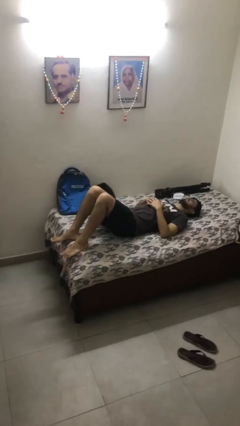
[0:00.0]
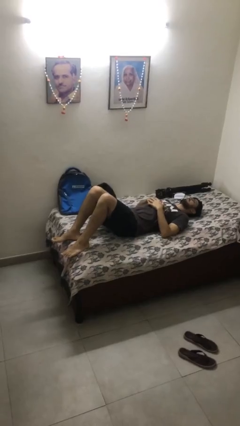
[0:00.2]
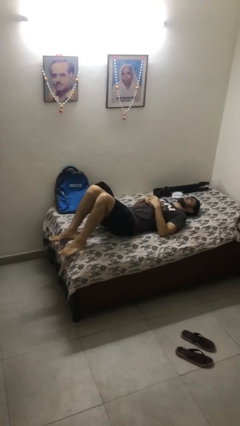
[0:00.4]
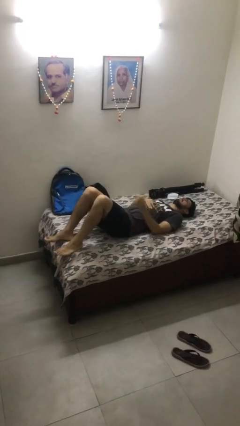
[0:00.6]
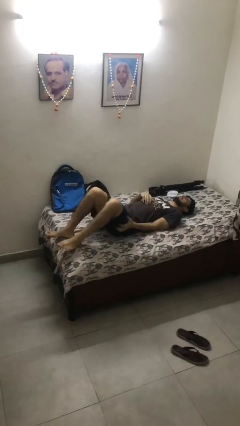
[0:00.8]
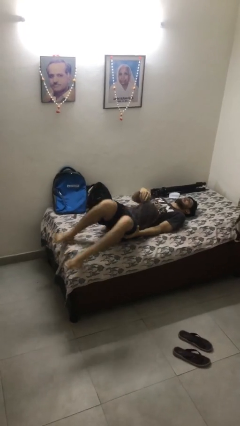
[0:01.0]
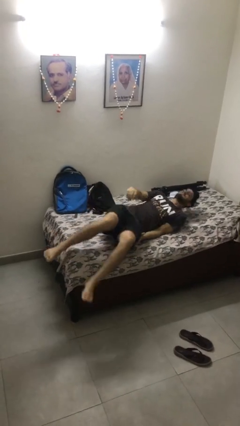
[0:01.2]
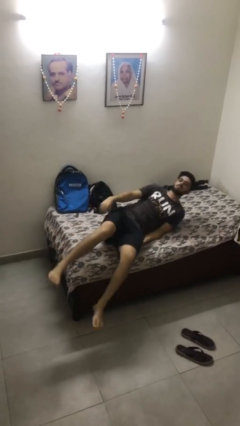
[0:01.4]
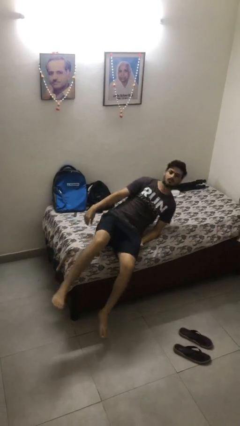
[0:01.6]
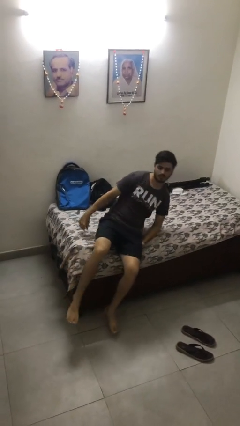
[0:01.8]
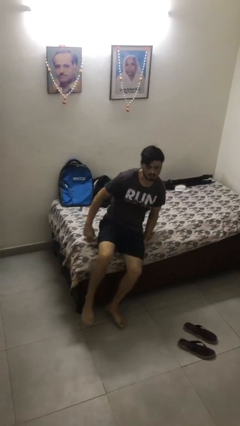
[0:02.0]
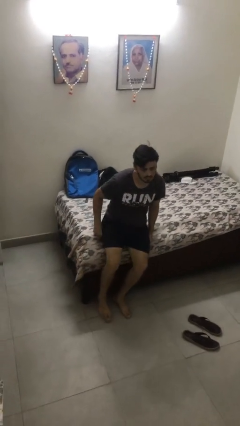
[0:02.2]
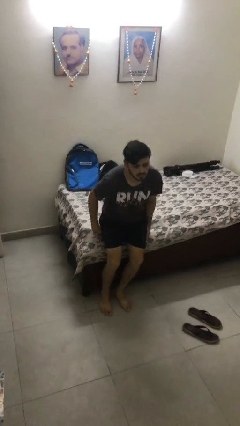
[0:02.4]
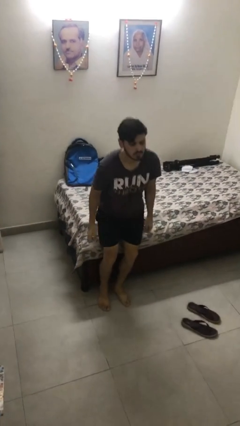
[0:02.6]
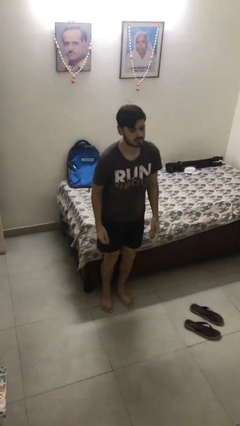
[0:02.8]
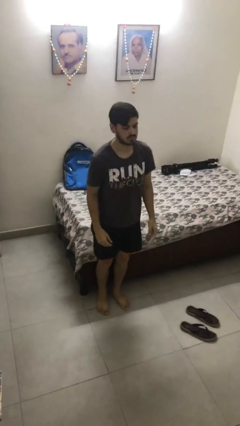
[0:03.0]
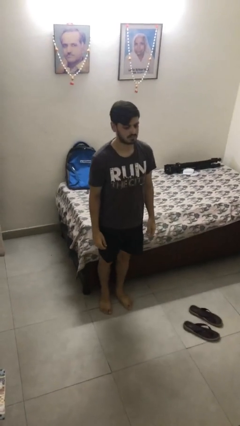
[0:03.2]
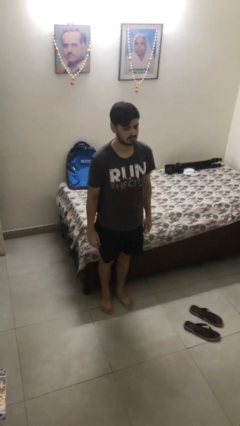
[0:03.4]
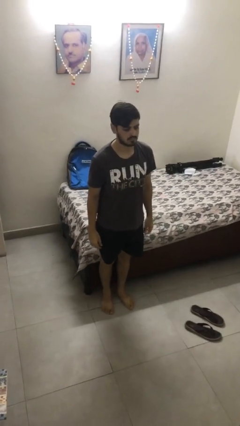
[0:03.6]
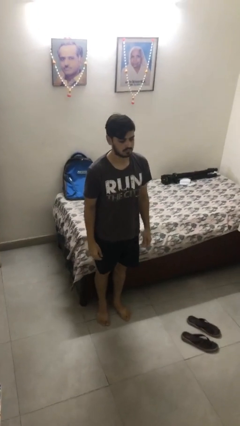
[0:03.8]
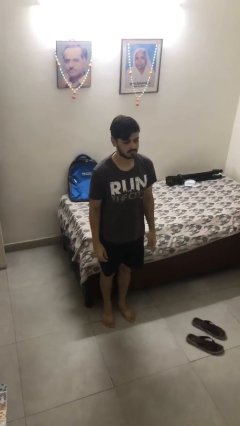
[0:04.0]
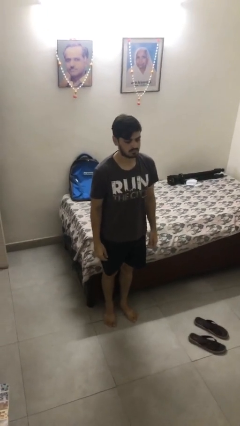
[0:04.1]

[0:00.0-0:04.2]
person stands up

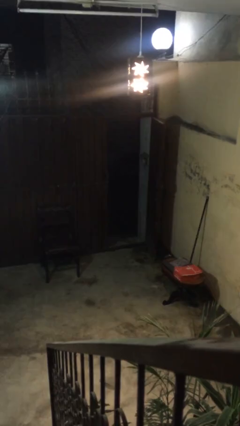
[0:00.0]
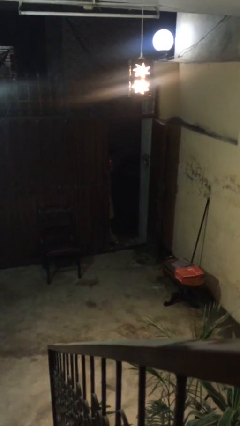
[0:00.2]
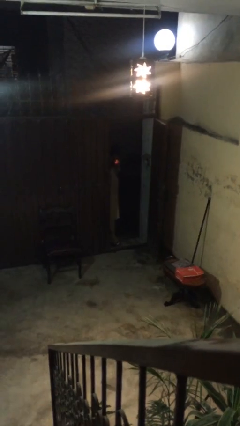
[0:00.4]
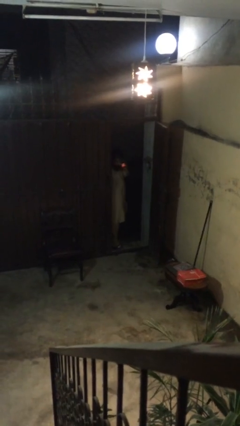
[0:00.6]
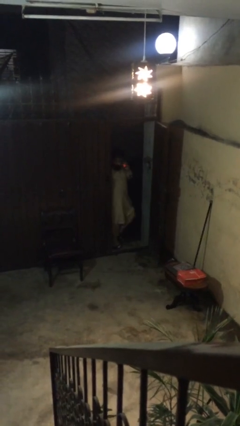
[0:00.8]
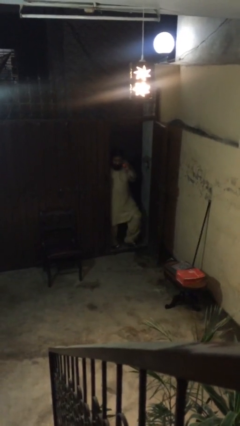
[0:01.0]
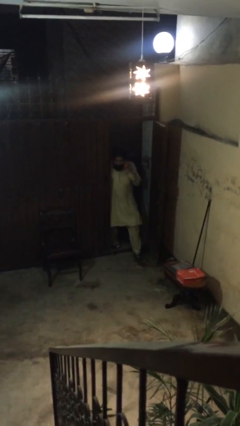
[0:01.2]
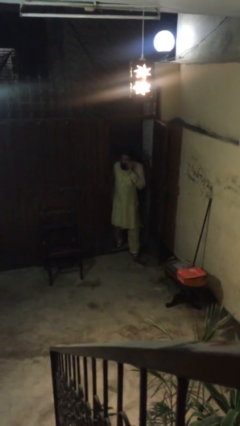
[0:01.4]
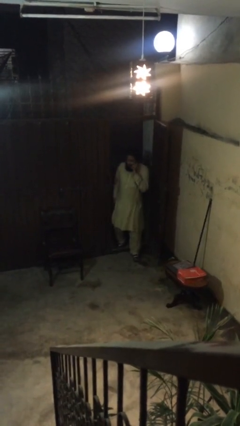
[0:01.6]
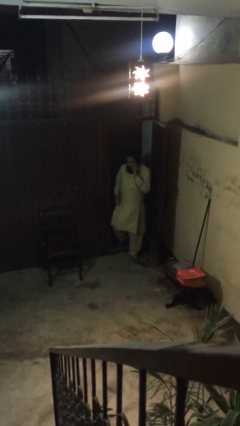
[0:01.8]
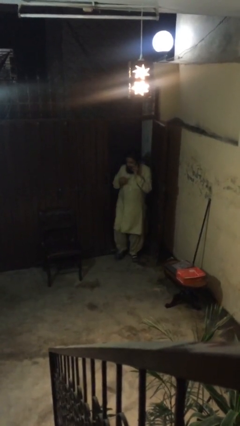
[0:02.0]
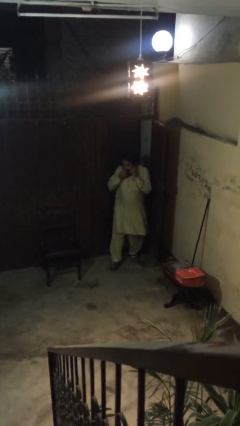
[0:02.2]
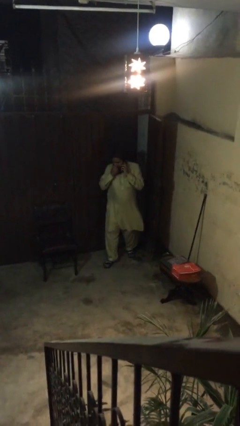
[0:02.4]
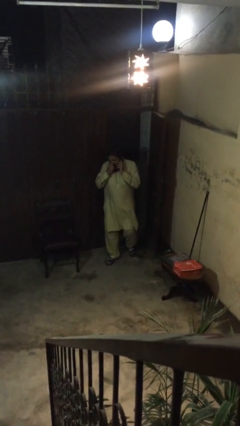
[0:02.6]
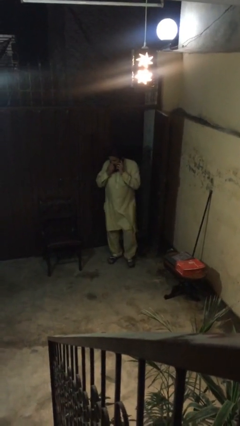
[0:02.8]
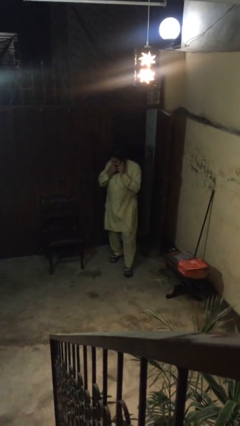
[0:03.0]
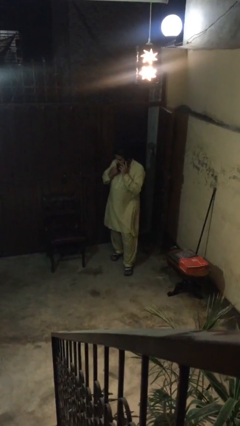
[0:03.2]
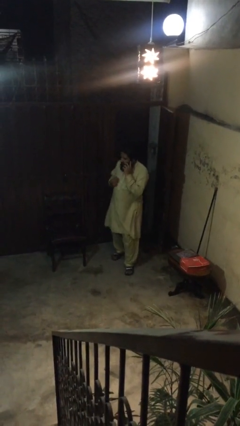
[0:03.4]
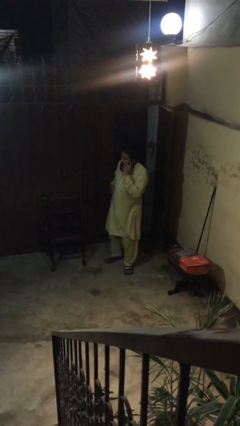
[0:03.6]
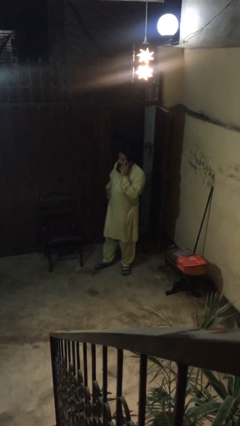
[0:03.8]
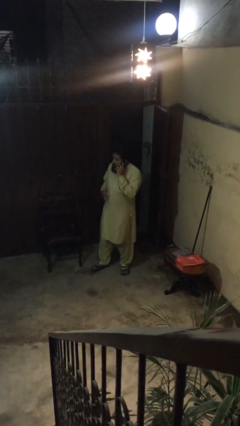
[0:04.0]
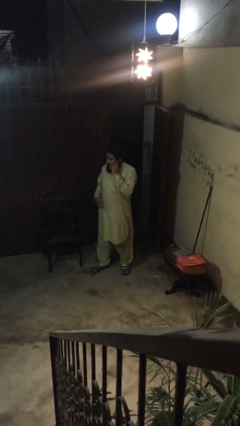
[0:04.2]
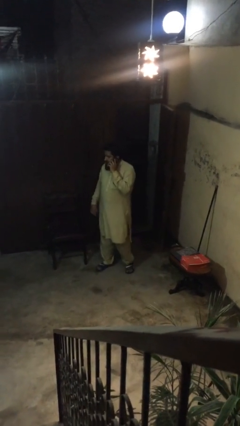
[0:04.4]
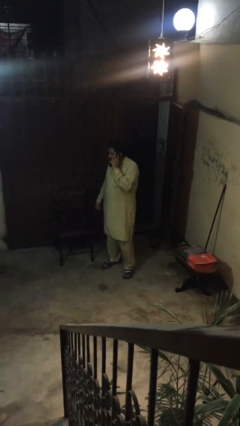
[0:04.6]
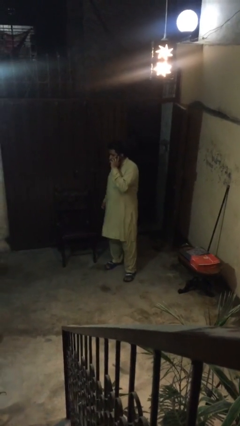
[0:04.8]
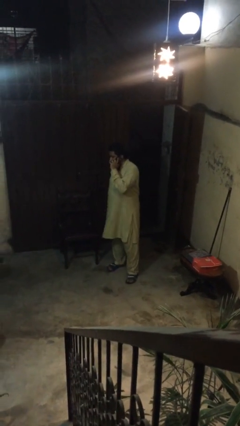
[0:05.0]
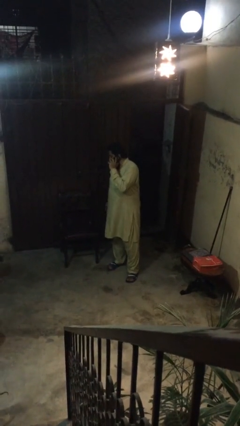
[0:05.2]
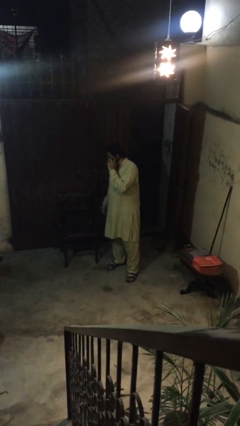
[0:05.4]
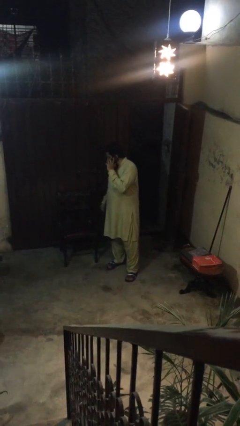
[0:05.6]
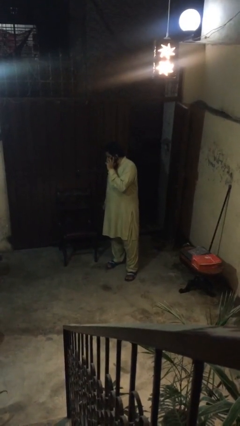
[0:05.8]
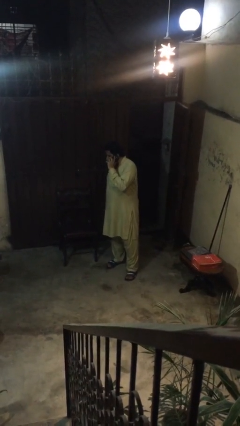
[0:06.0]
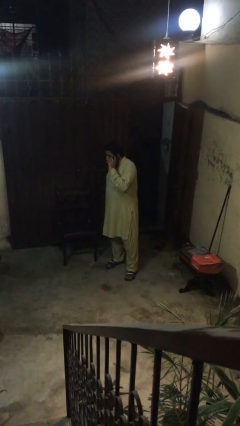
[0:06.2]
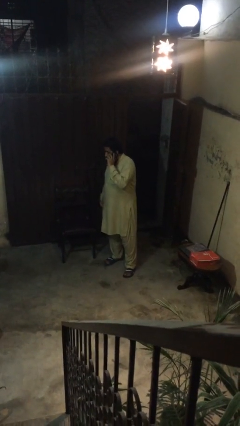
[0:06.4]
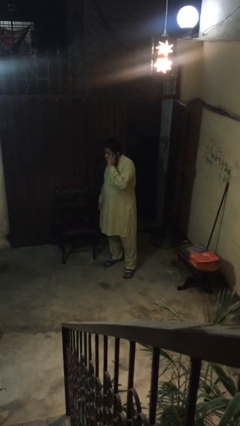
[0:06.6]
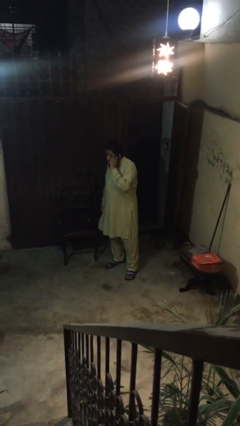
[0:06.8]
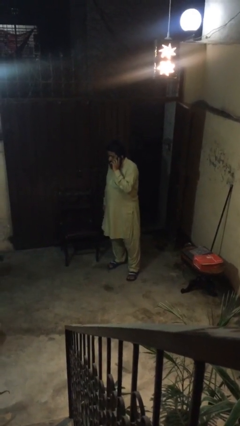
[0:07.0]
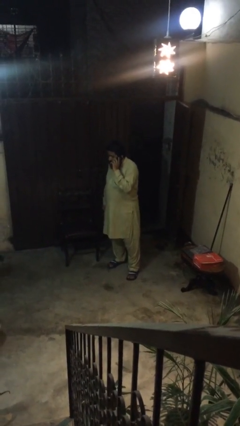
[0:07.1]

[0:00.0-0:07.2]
person enters scene through structure

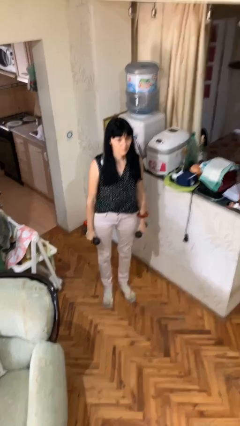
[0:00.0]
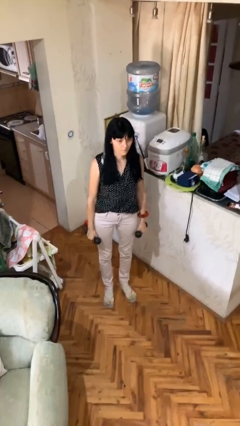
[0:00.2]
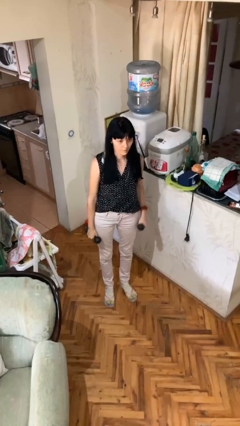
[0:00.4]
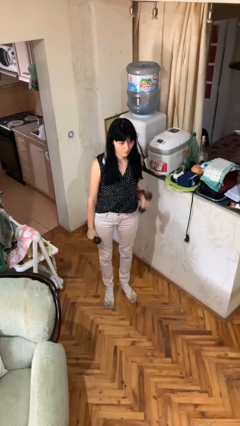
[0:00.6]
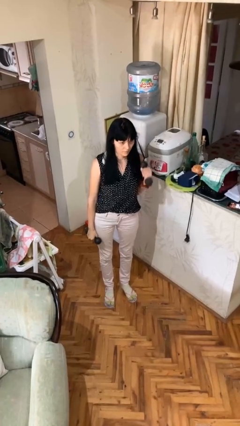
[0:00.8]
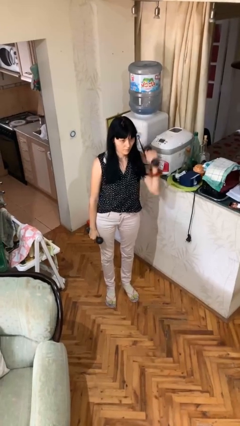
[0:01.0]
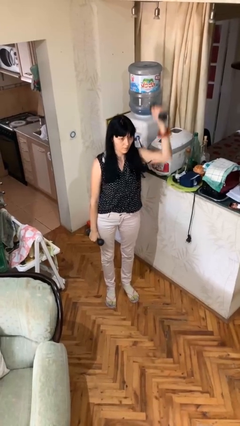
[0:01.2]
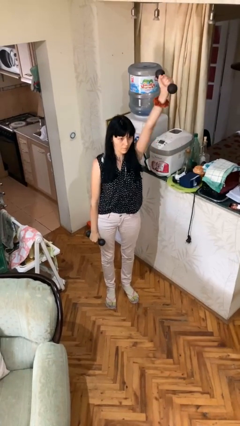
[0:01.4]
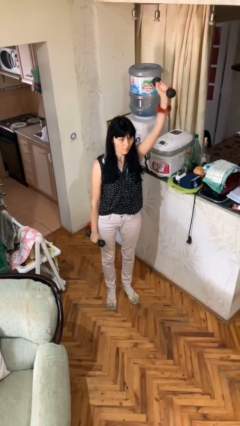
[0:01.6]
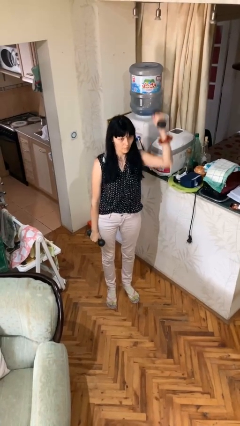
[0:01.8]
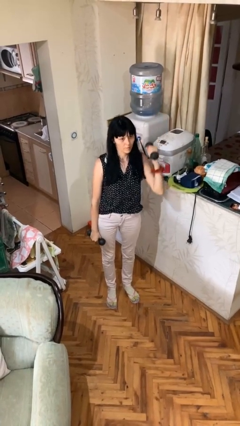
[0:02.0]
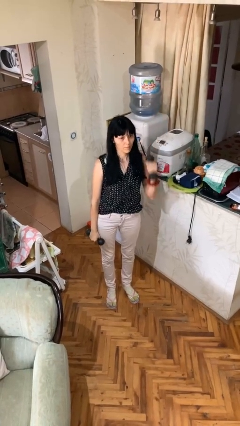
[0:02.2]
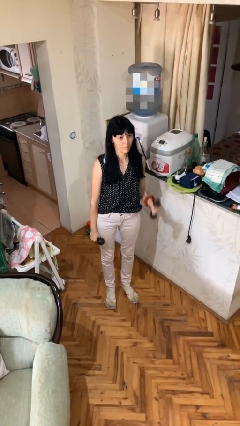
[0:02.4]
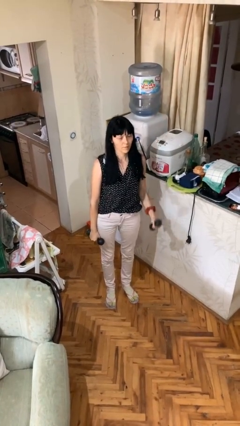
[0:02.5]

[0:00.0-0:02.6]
person lifts dumbbells

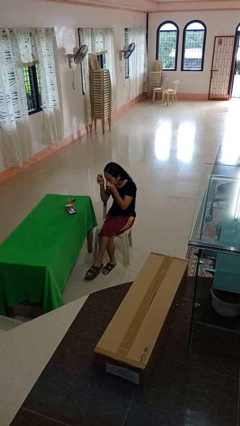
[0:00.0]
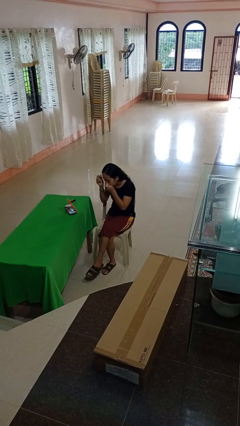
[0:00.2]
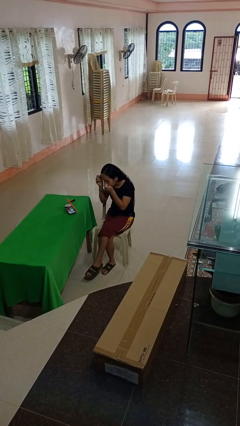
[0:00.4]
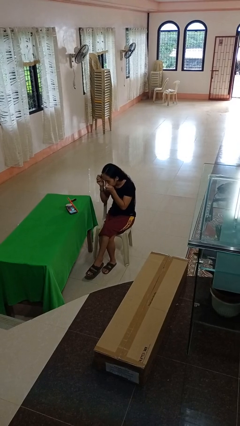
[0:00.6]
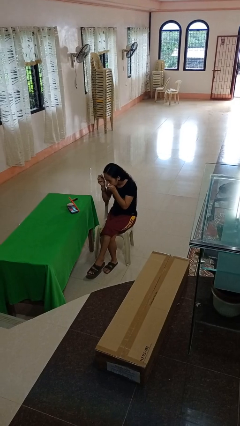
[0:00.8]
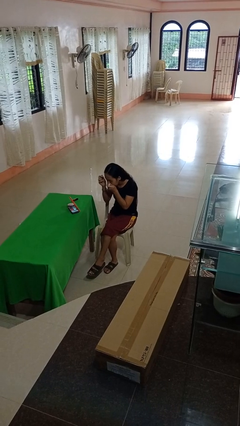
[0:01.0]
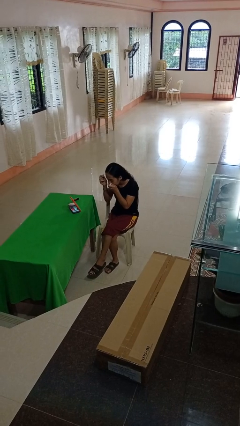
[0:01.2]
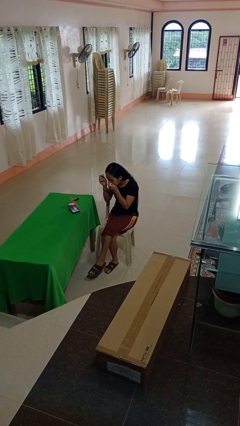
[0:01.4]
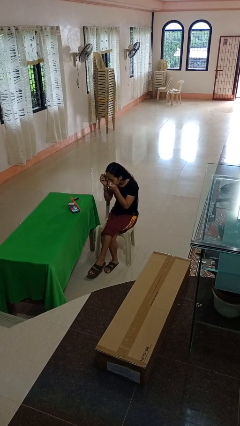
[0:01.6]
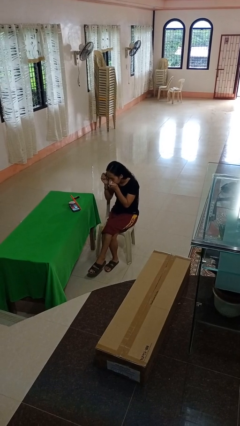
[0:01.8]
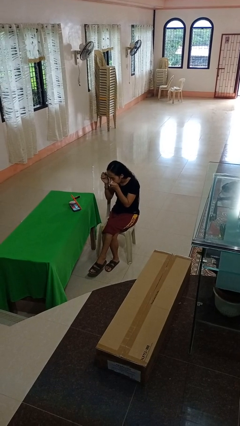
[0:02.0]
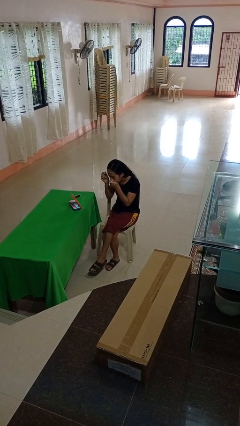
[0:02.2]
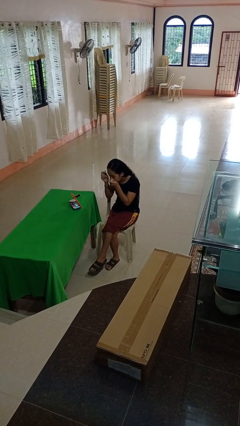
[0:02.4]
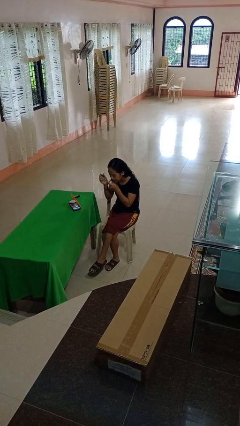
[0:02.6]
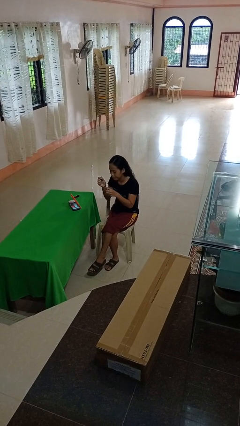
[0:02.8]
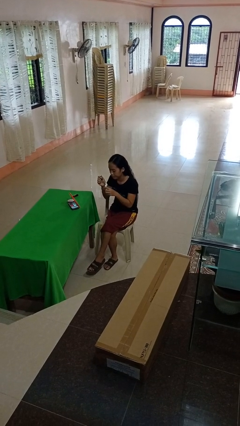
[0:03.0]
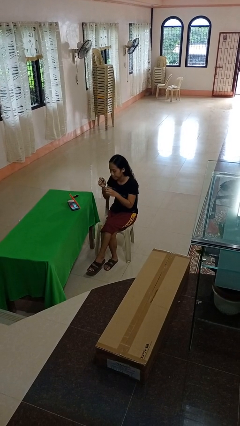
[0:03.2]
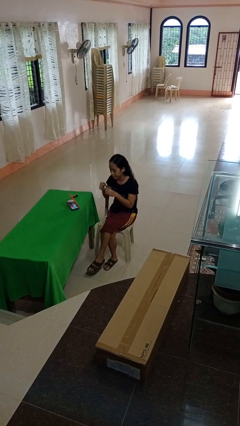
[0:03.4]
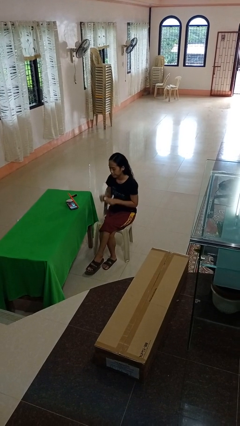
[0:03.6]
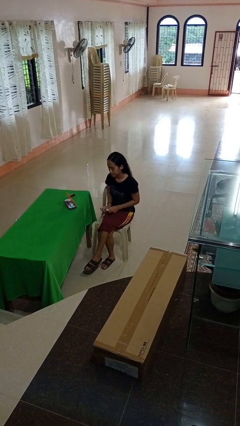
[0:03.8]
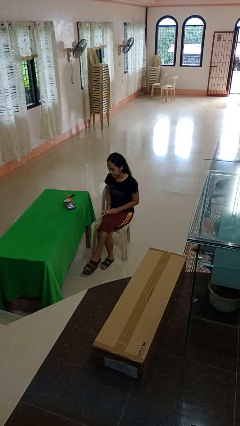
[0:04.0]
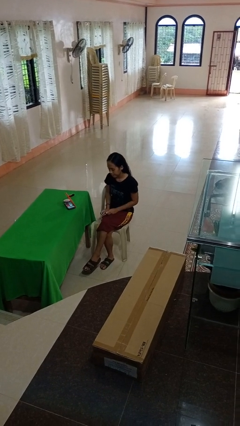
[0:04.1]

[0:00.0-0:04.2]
person applies eye makeup
